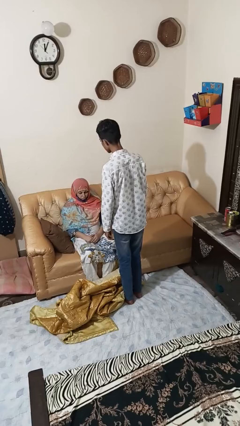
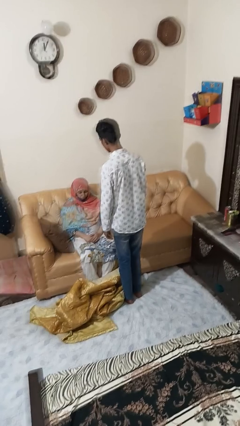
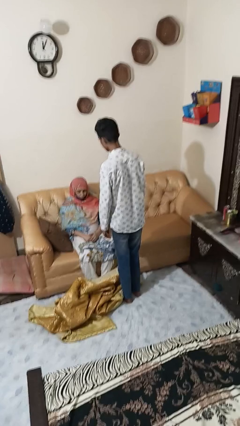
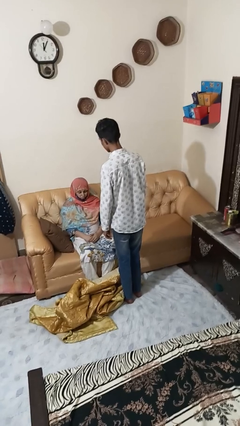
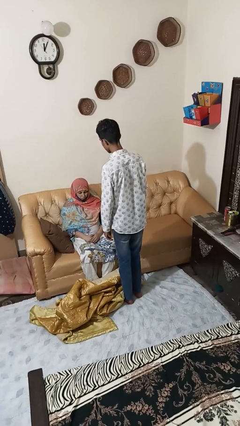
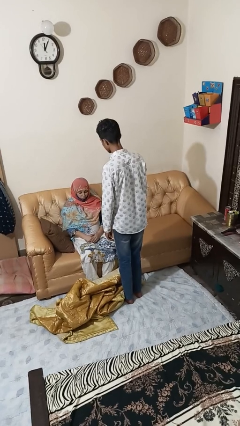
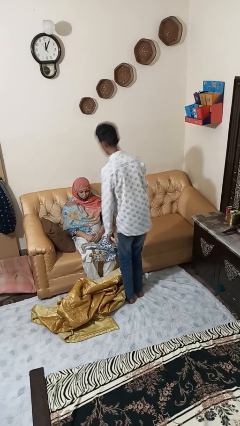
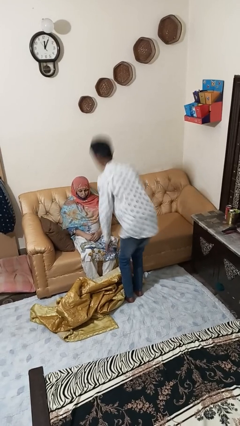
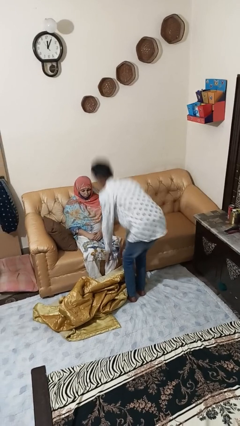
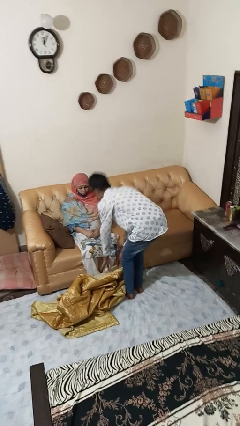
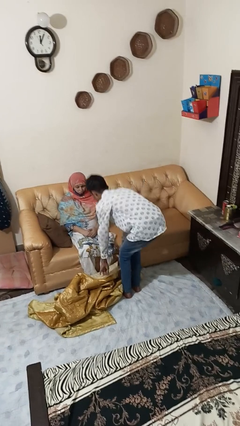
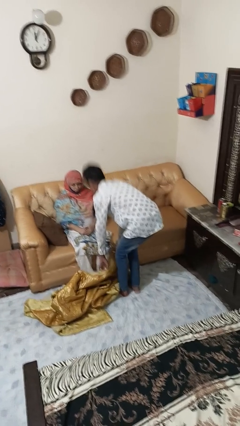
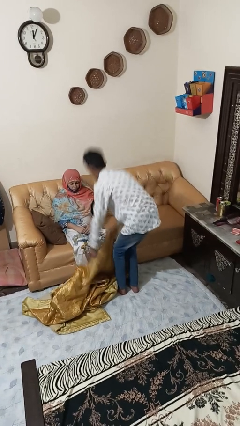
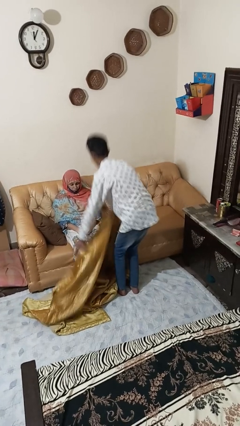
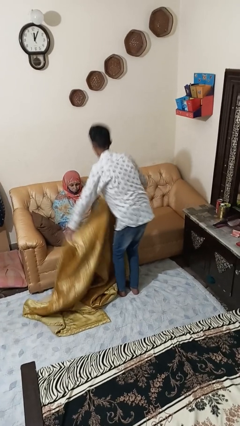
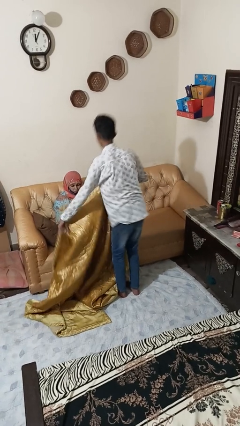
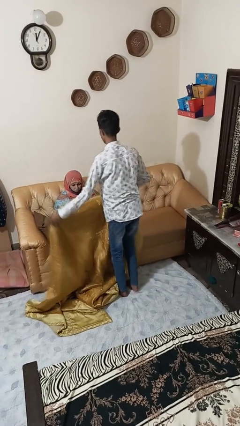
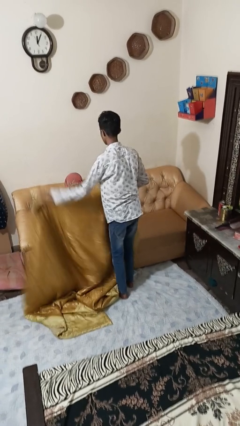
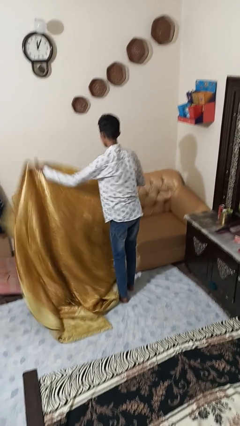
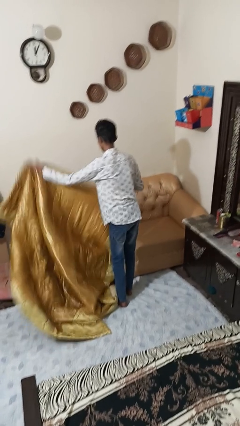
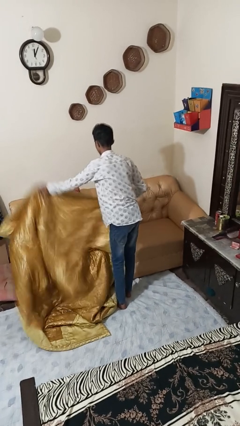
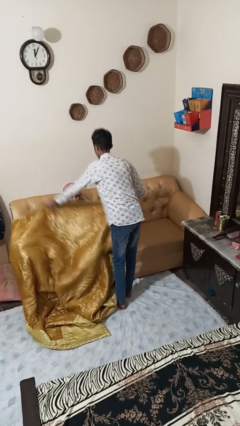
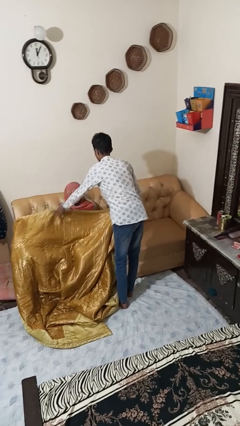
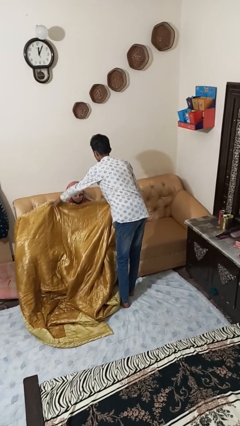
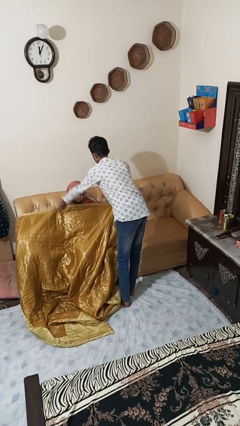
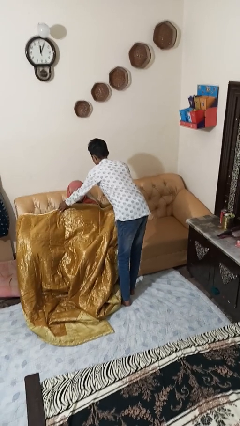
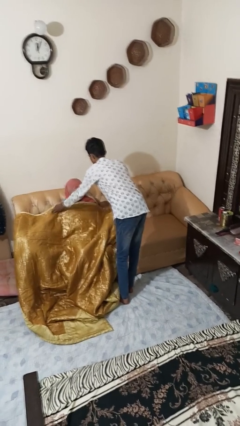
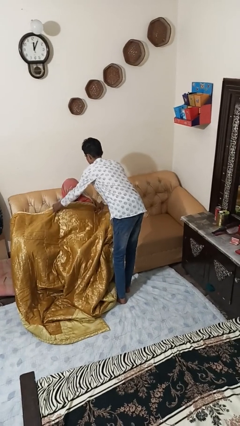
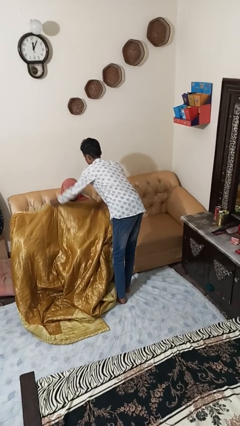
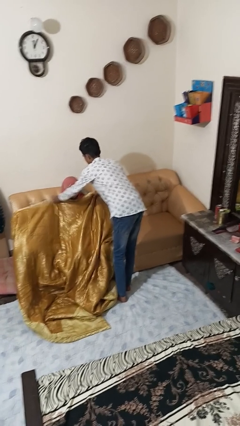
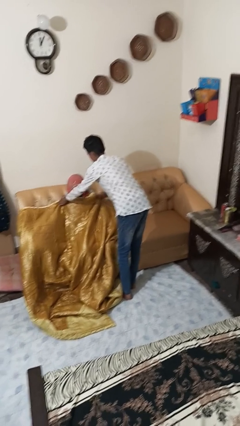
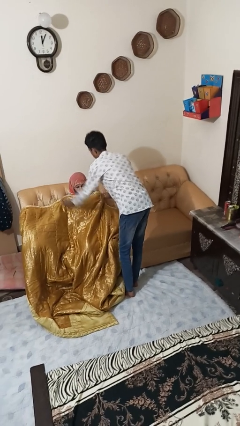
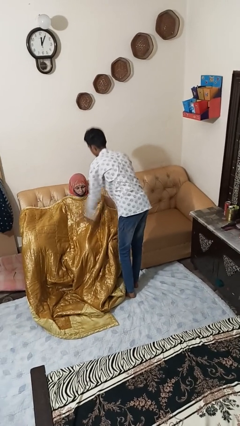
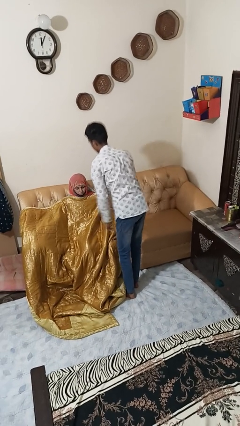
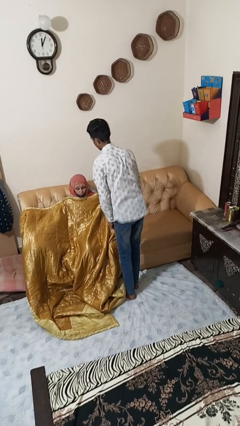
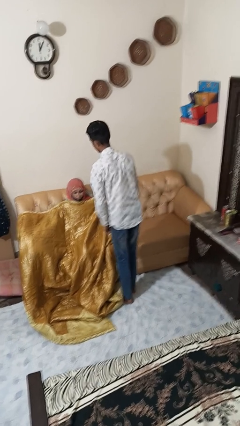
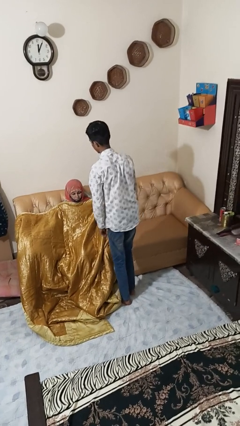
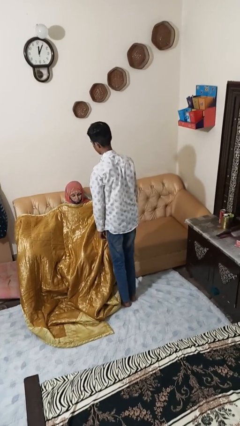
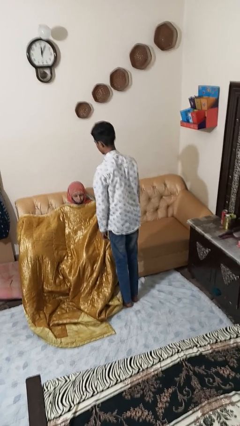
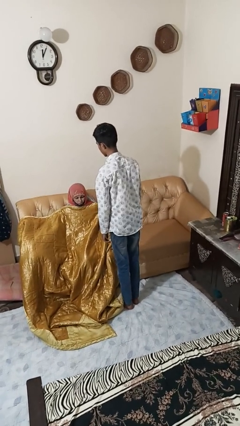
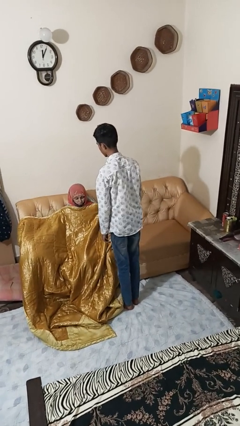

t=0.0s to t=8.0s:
person covers friend with blanket

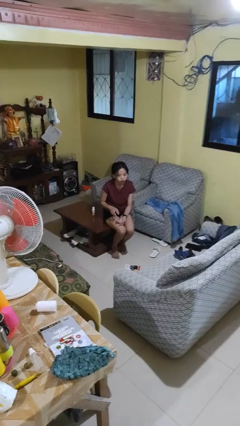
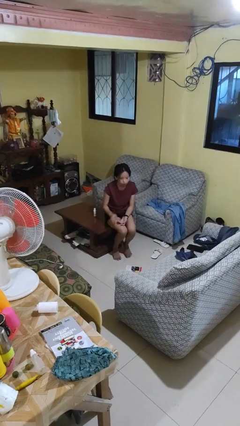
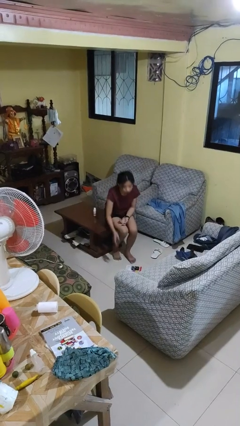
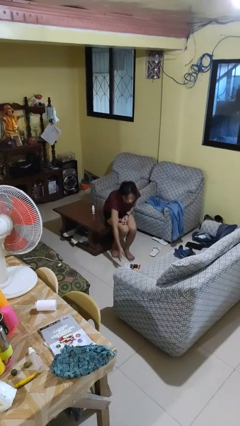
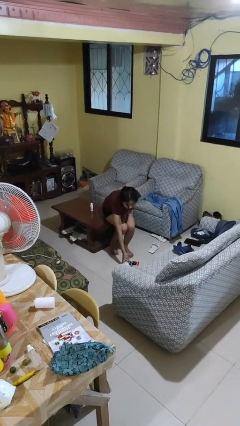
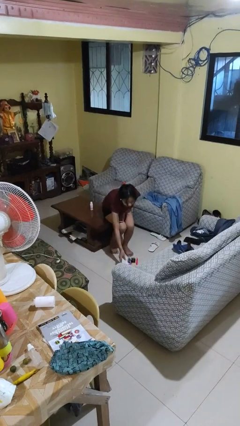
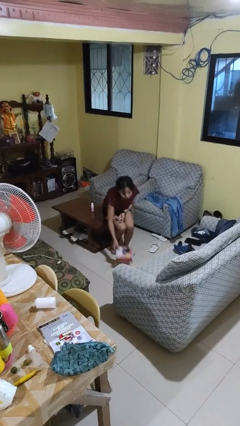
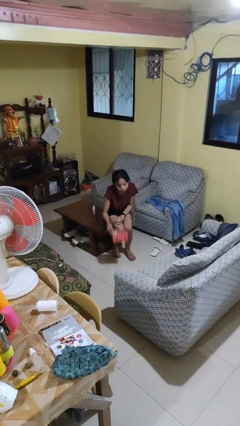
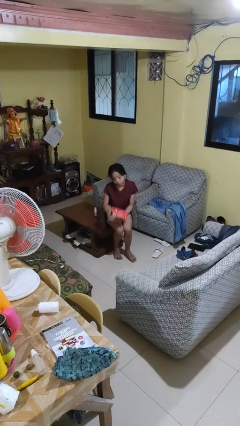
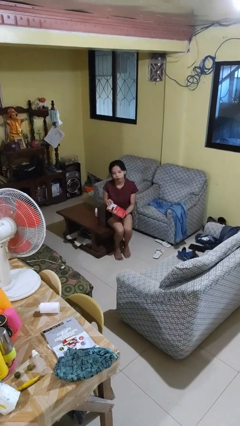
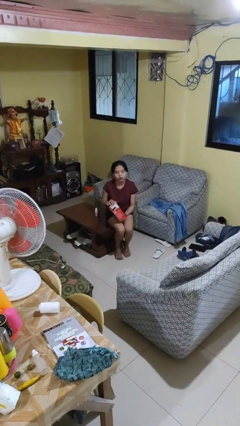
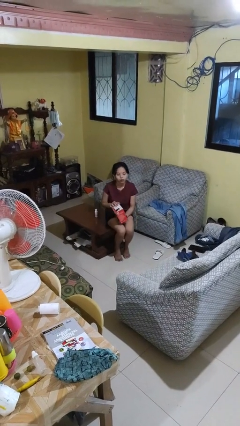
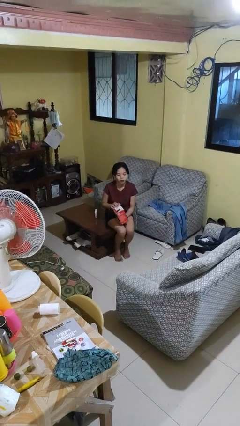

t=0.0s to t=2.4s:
person picks up object from floor

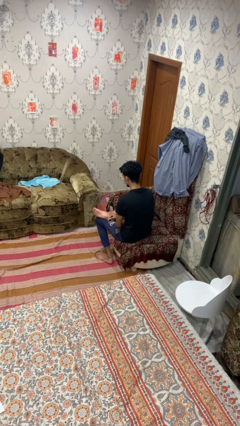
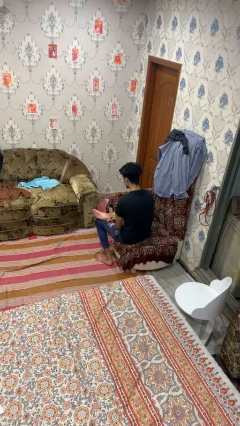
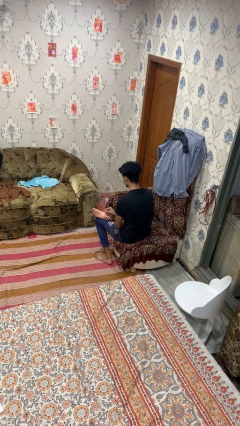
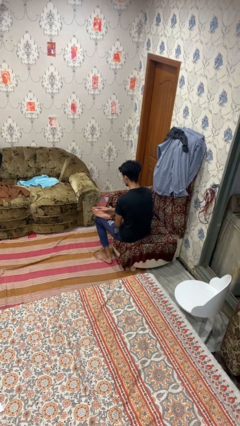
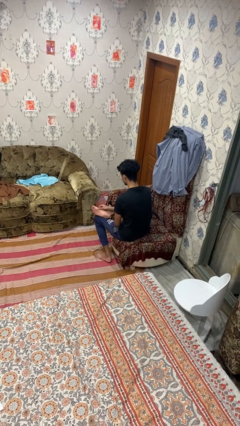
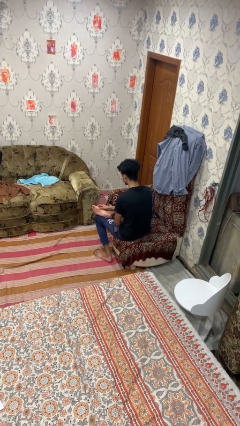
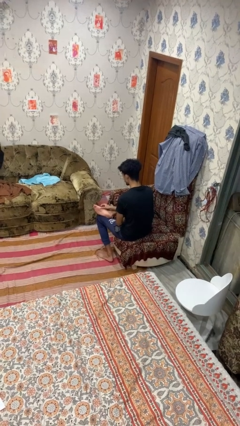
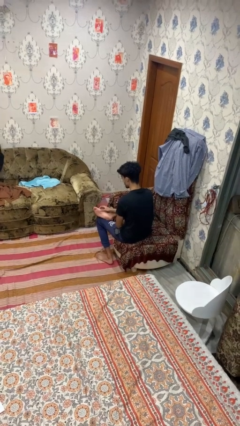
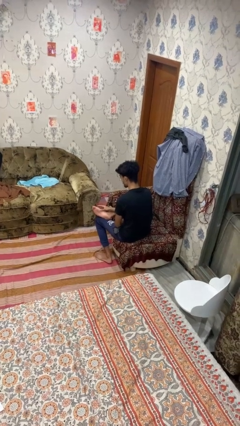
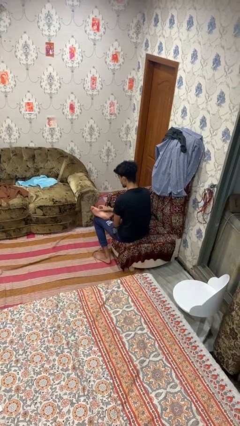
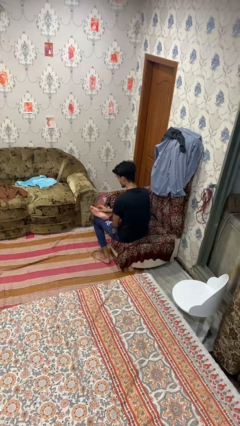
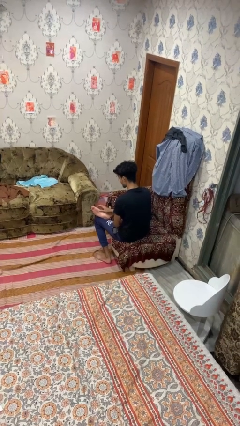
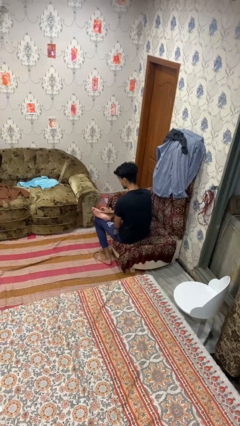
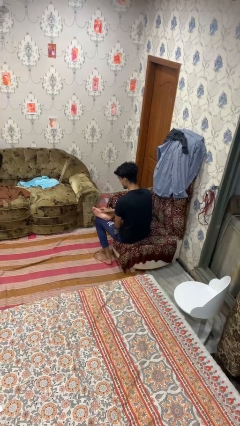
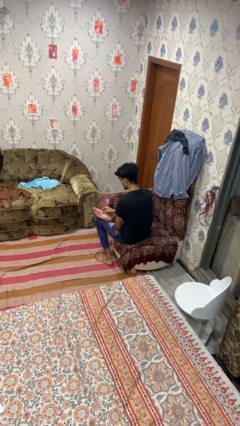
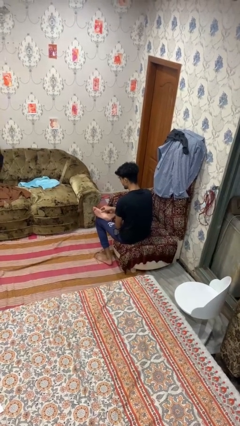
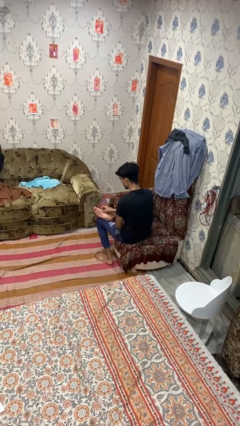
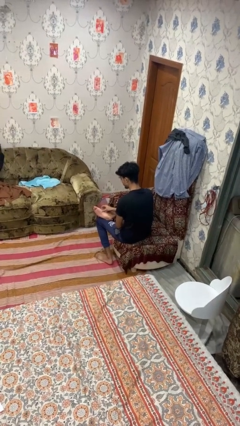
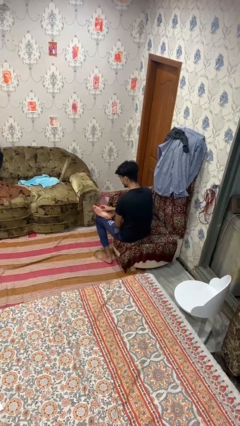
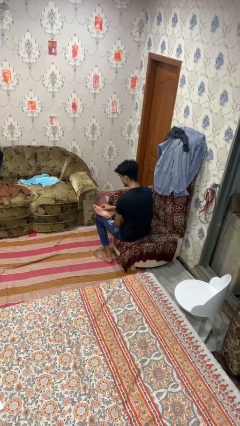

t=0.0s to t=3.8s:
person rubs foot

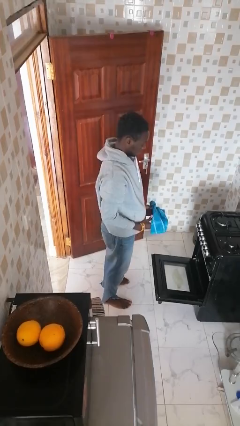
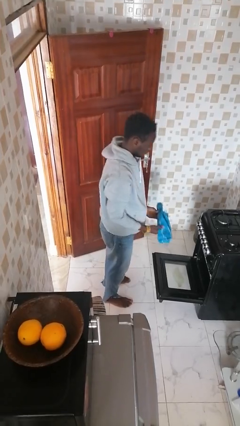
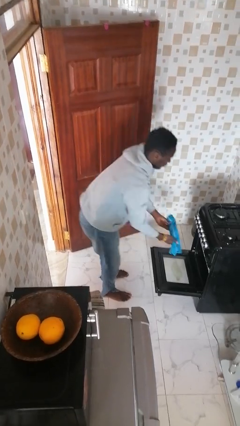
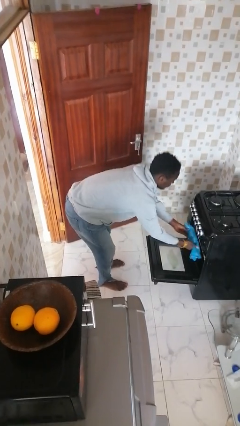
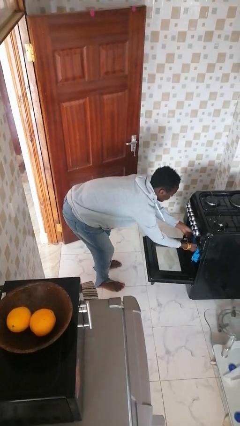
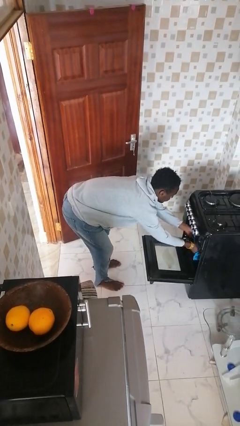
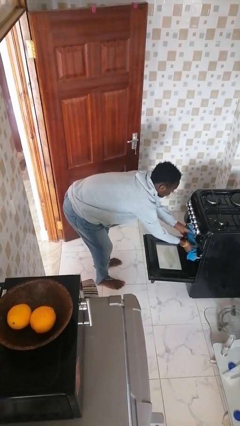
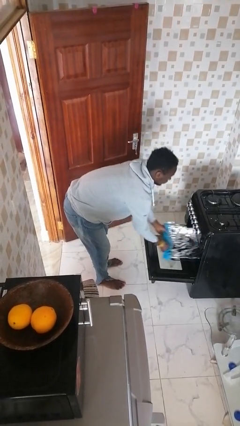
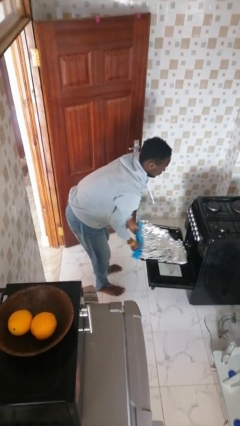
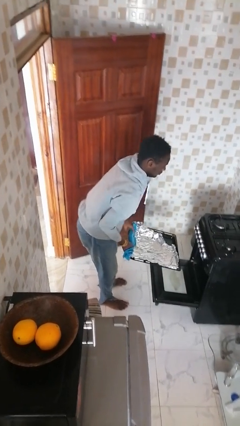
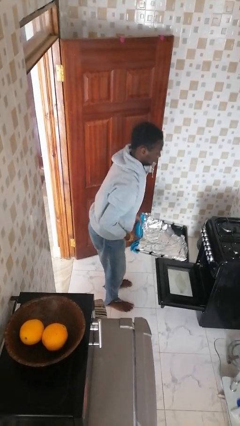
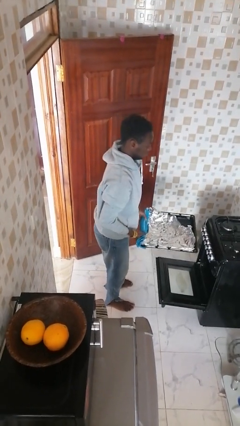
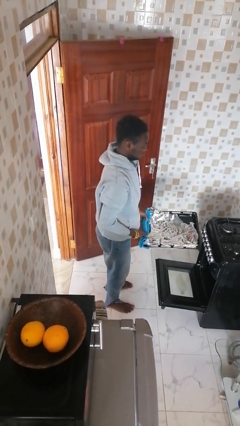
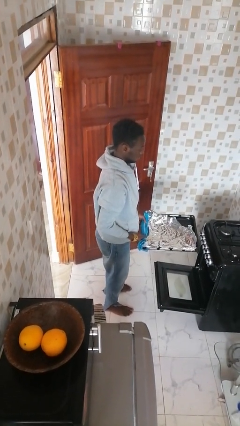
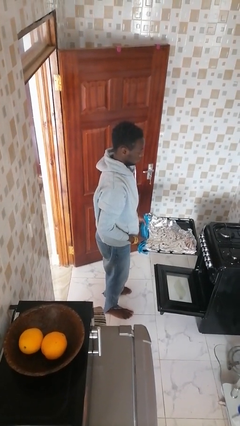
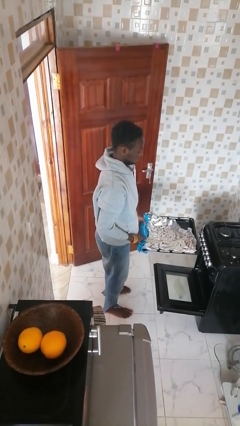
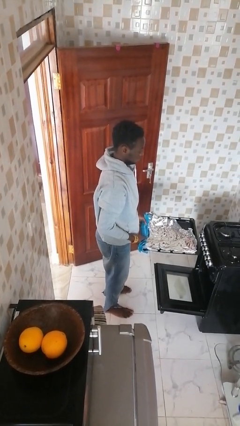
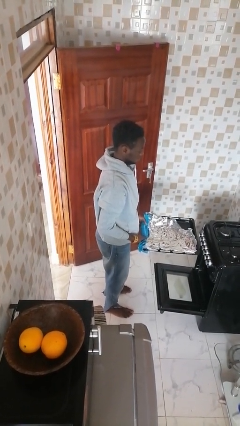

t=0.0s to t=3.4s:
person takes object from oven
